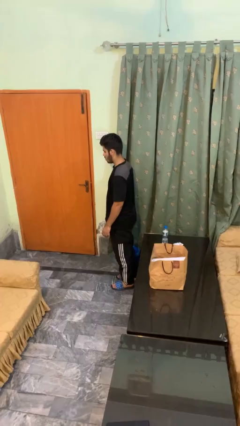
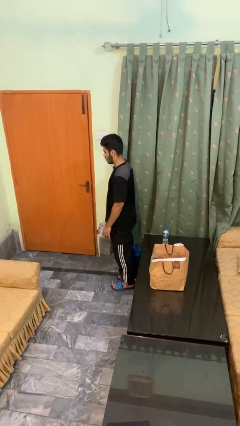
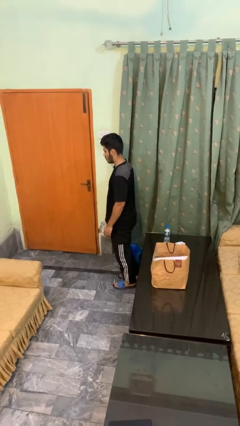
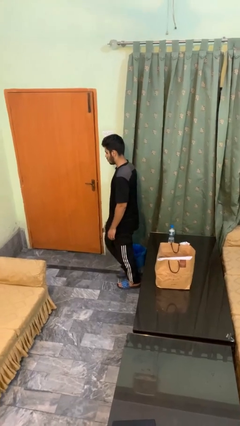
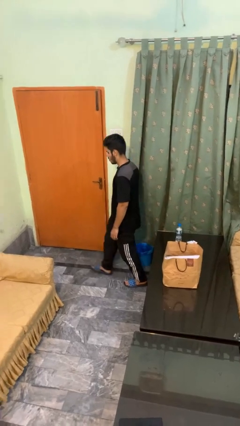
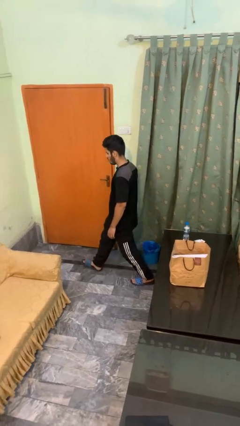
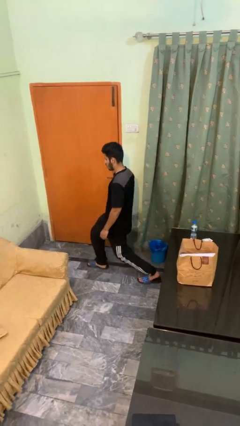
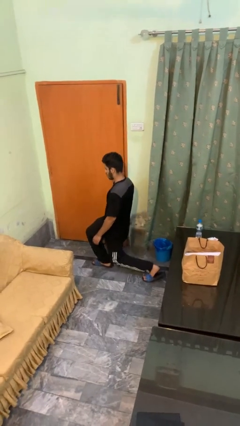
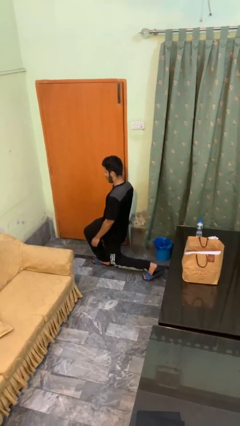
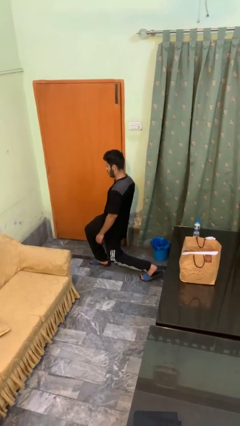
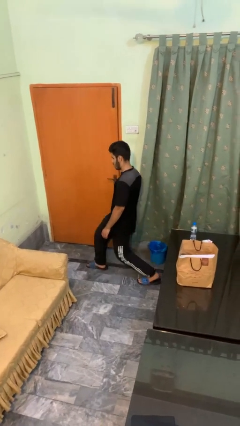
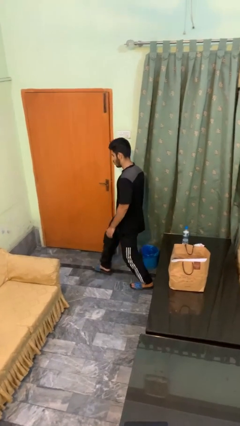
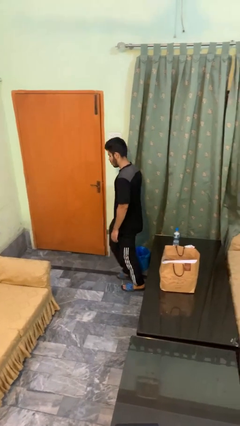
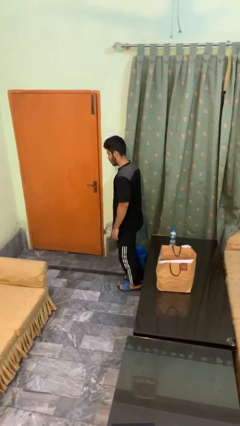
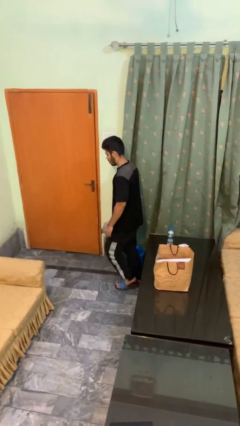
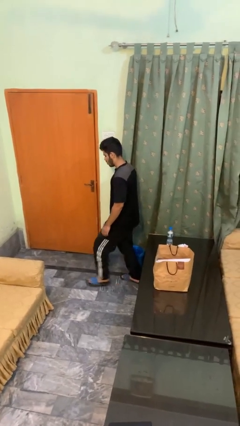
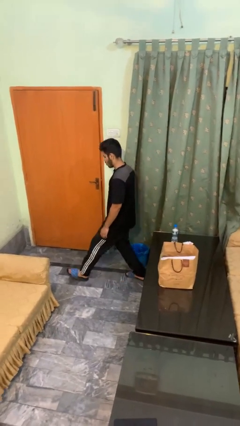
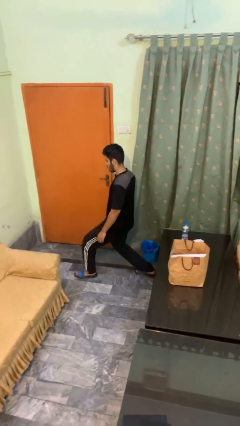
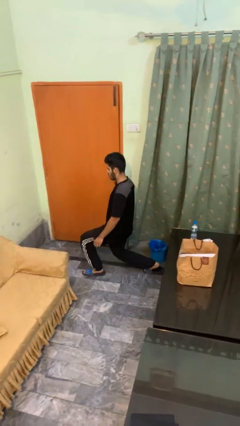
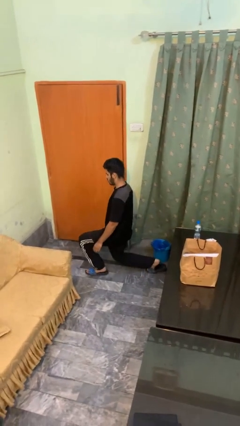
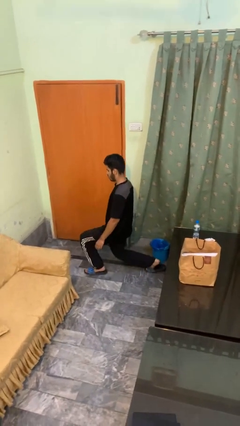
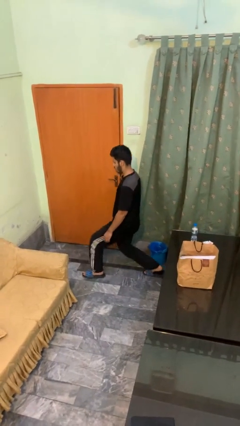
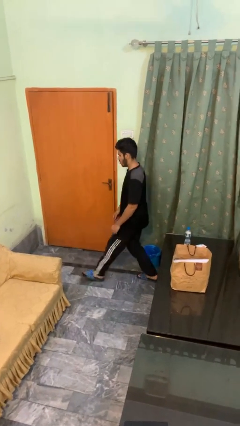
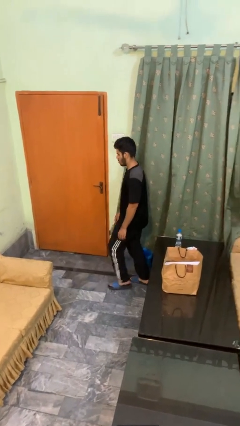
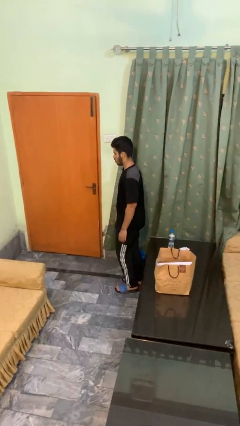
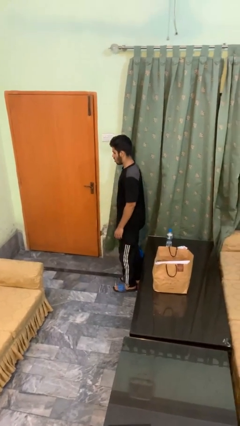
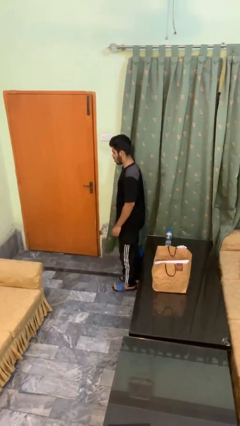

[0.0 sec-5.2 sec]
person exercises with lunges

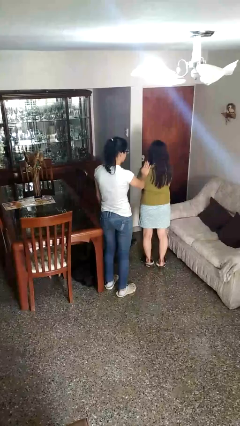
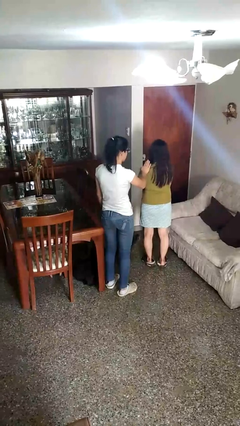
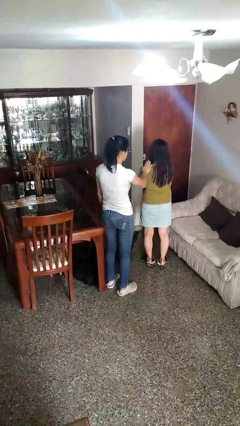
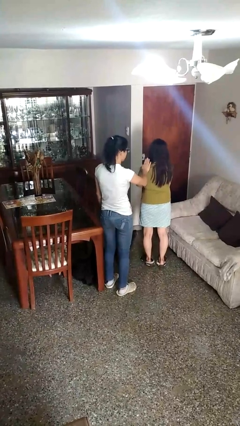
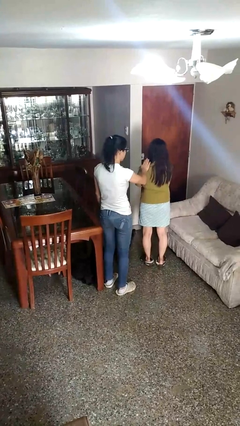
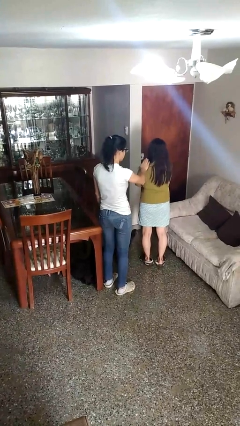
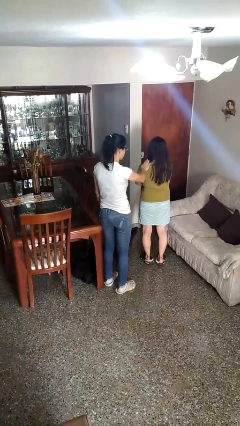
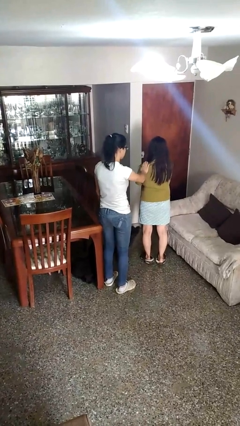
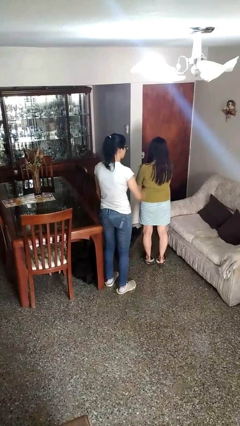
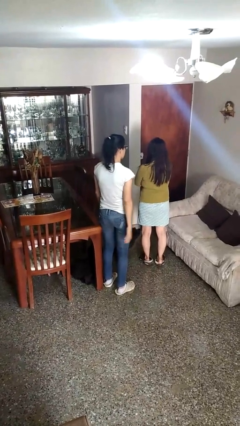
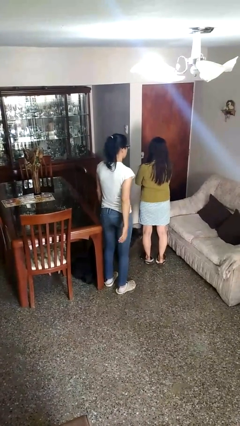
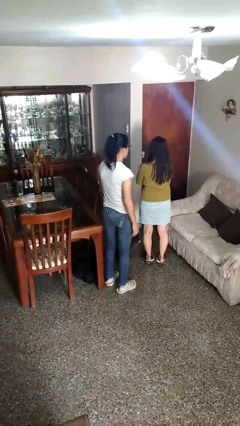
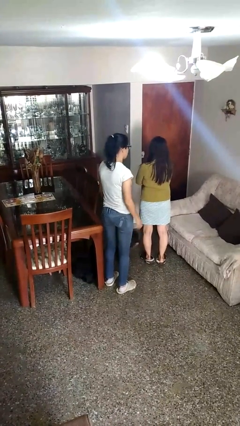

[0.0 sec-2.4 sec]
person touches back of person

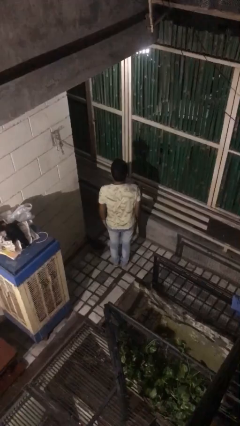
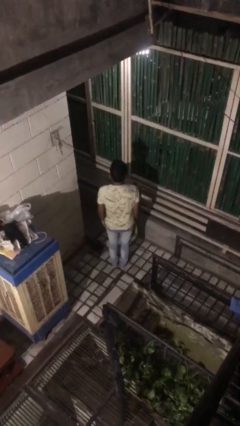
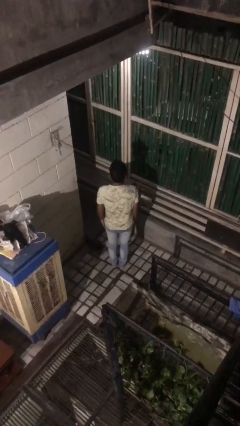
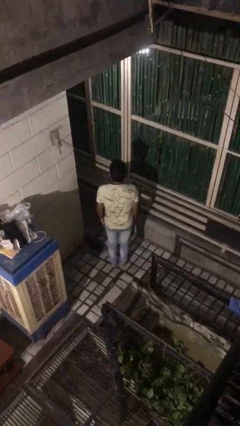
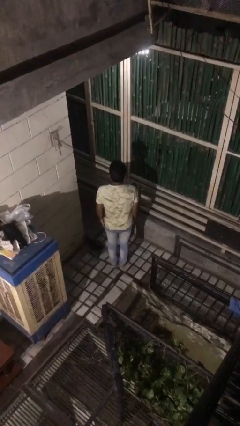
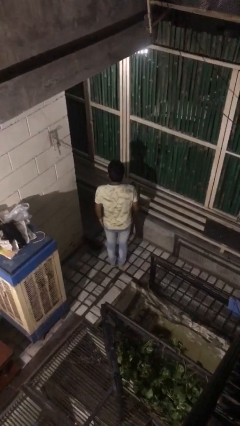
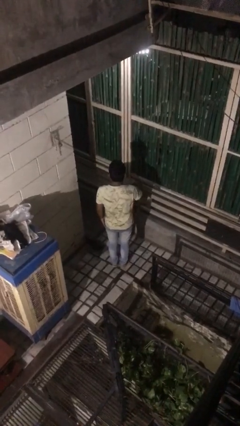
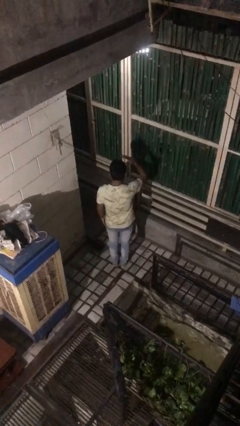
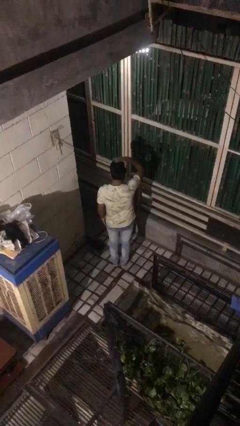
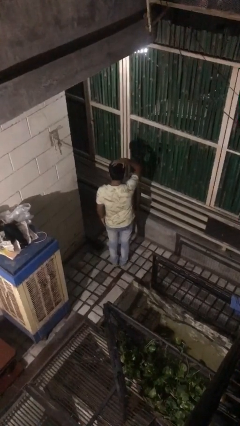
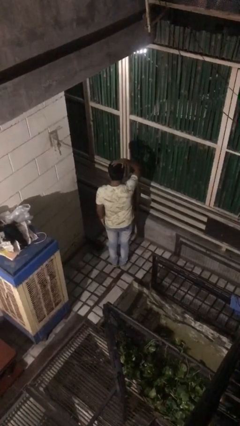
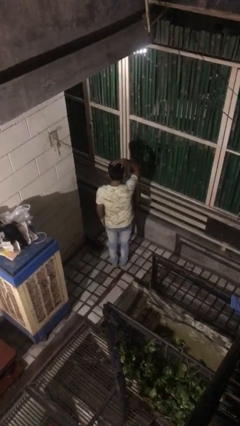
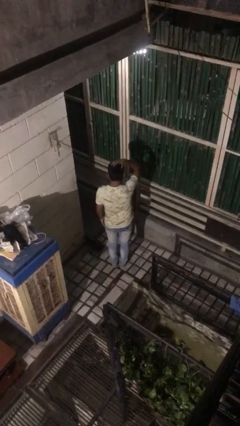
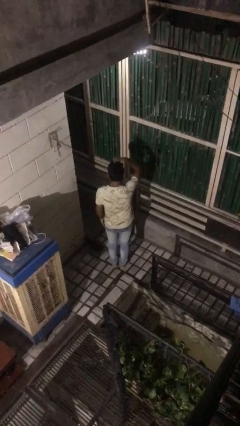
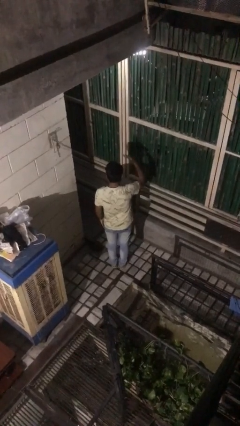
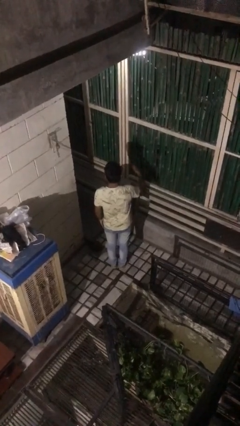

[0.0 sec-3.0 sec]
person pats head

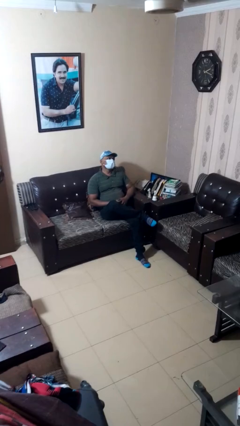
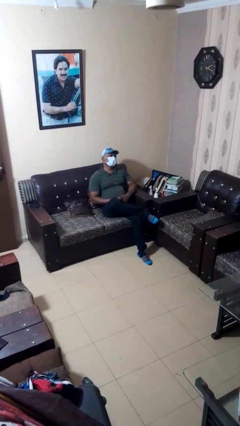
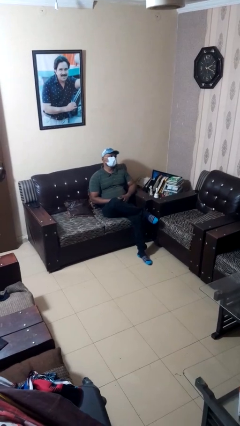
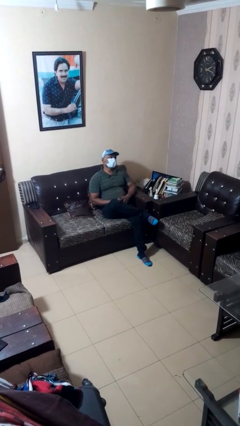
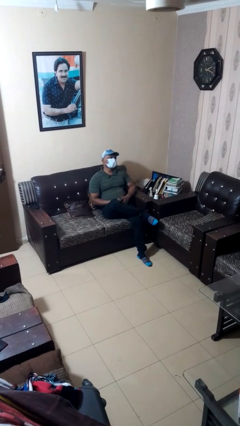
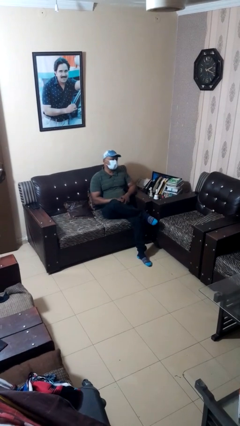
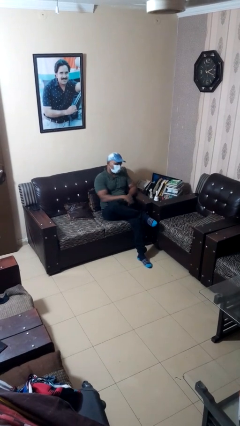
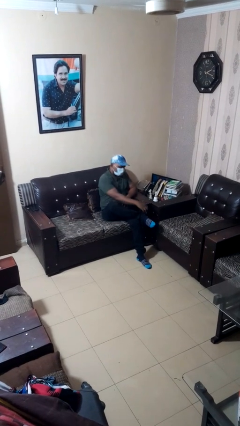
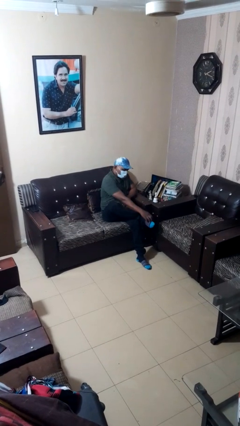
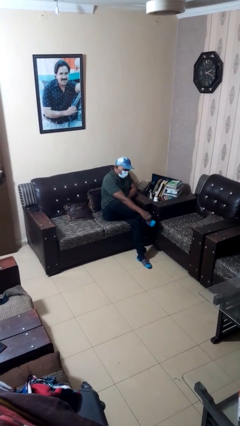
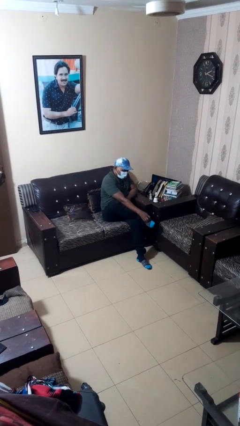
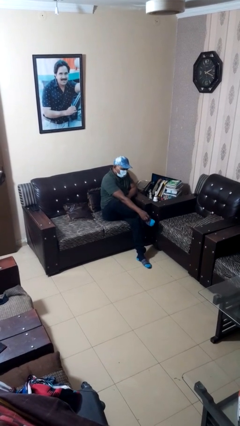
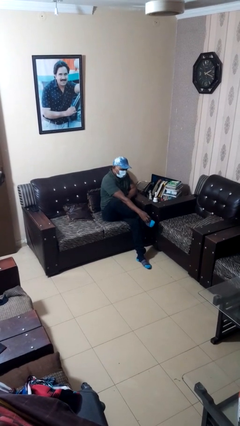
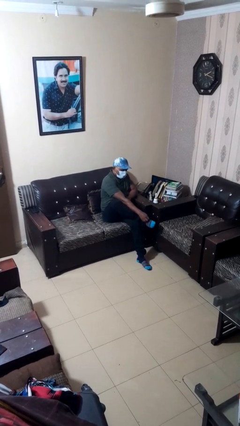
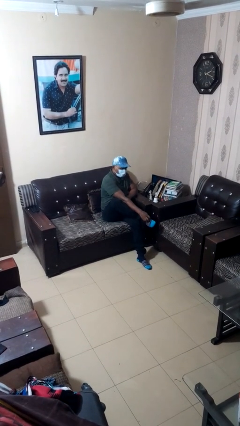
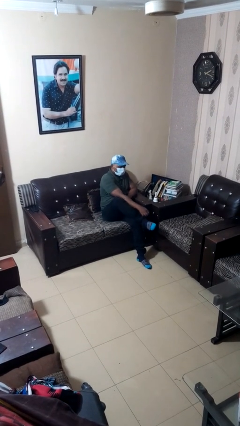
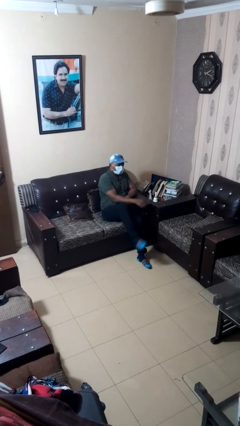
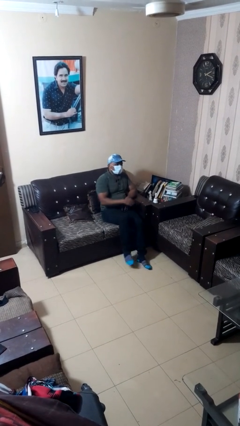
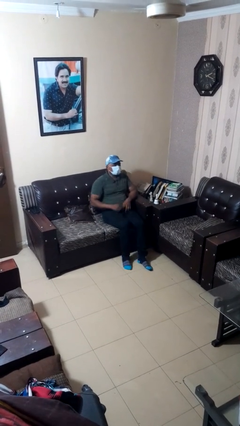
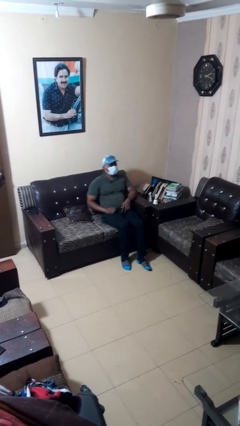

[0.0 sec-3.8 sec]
person rubs foot

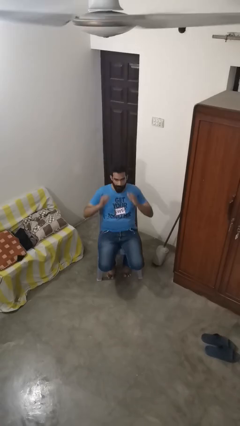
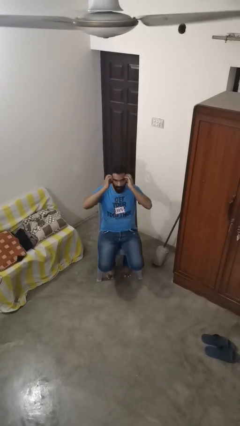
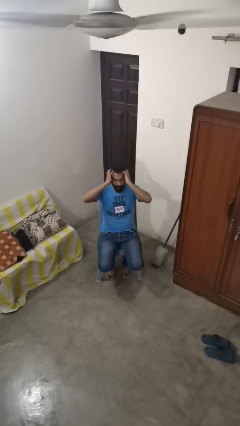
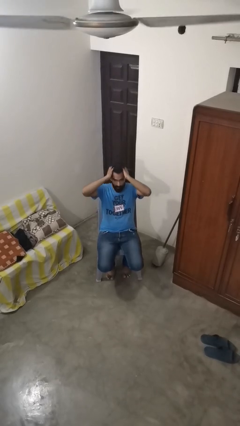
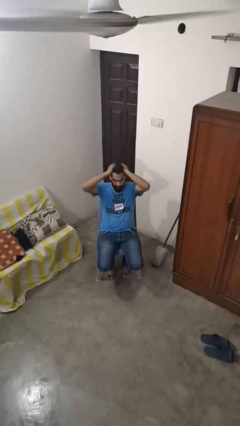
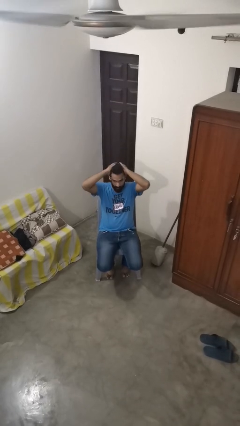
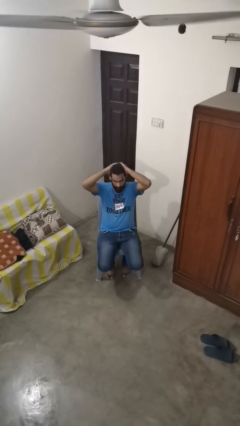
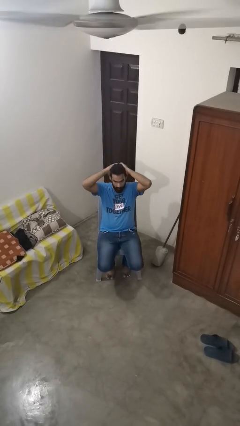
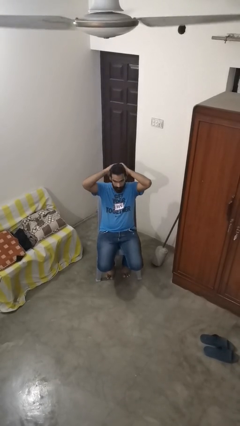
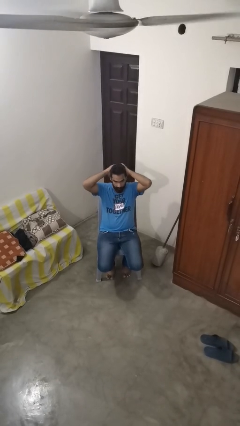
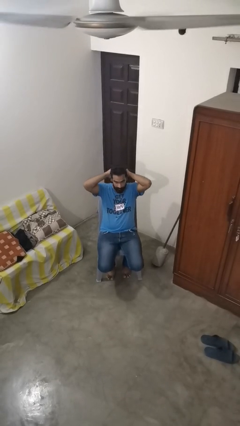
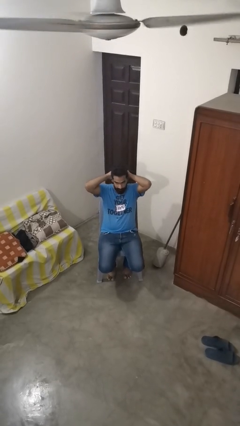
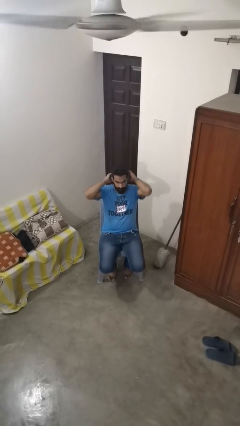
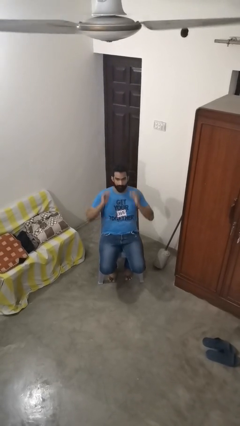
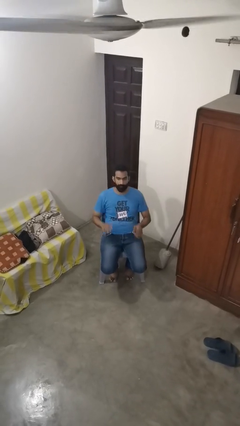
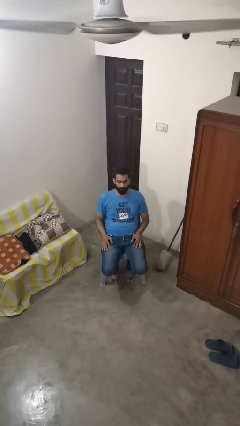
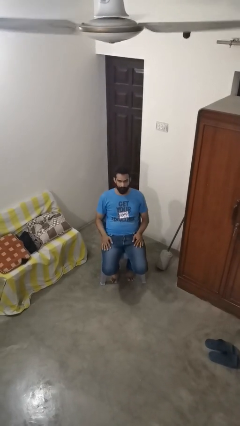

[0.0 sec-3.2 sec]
person strokes hair

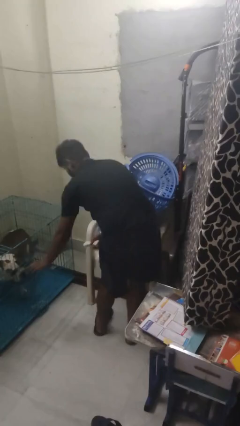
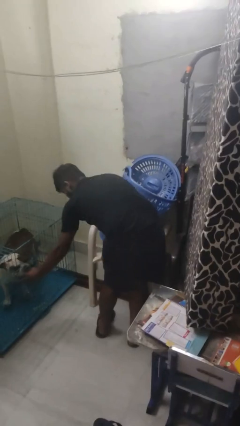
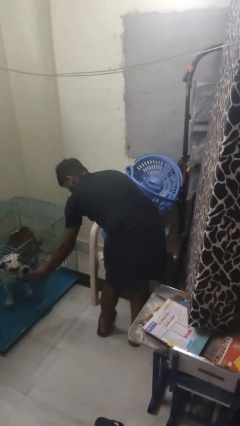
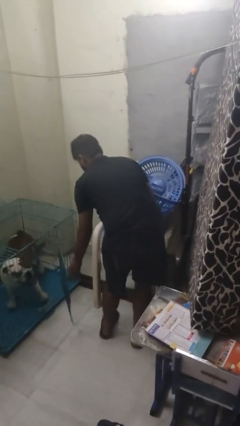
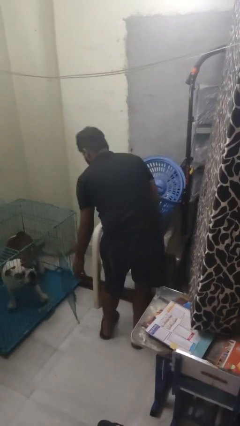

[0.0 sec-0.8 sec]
person uncrates dog
